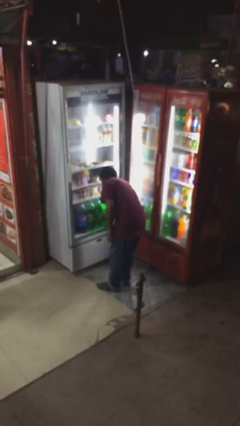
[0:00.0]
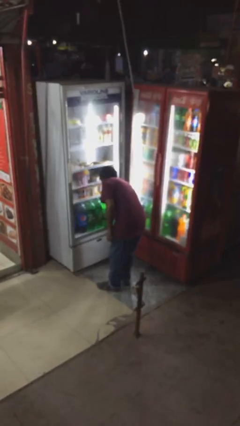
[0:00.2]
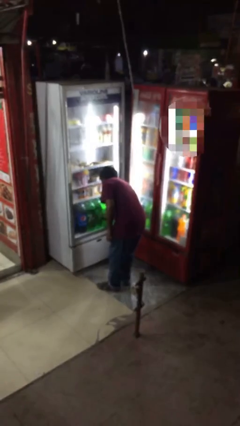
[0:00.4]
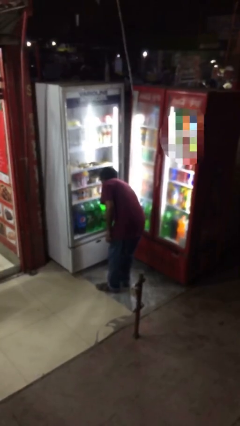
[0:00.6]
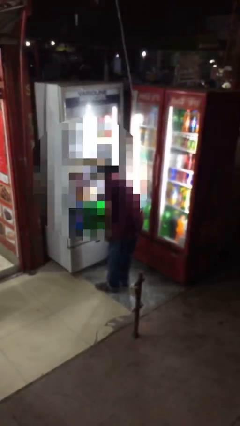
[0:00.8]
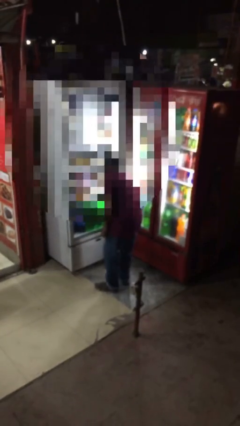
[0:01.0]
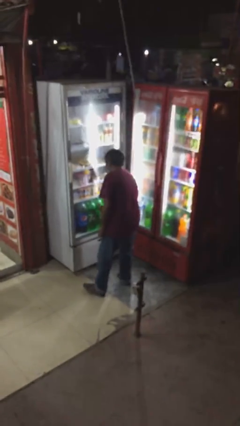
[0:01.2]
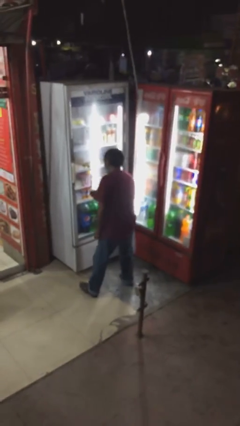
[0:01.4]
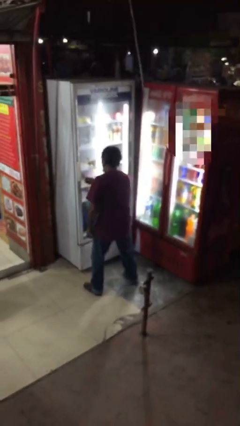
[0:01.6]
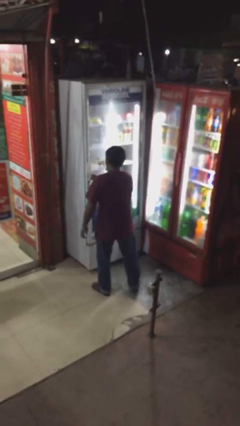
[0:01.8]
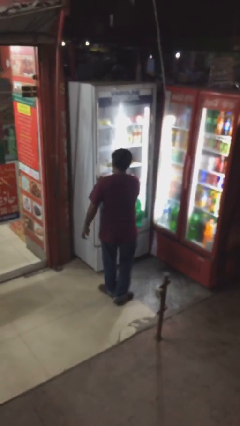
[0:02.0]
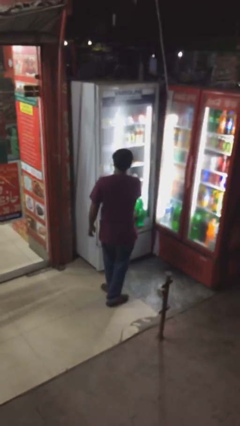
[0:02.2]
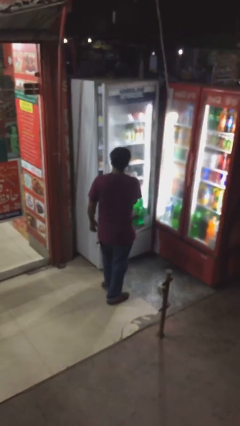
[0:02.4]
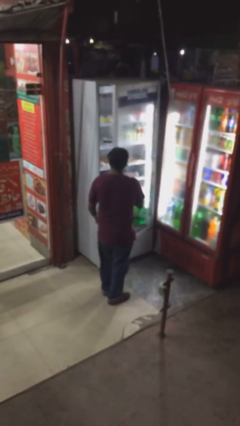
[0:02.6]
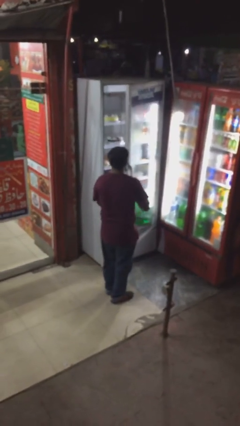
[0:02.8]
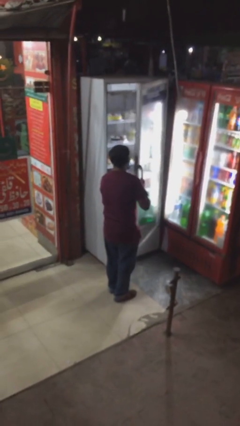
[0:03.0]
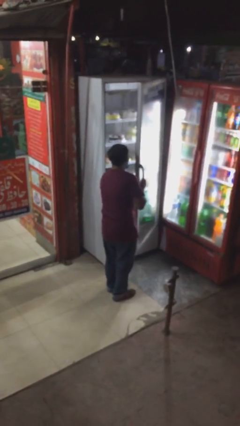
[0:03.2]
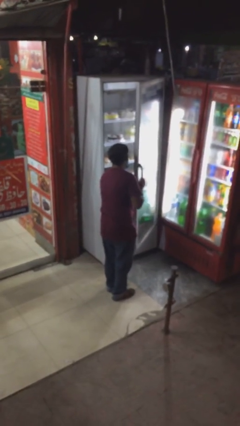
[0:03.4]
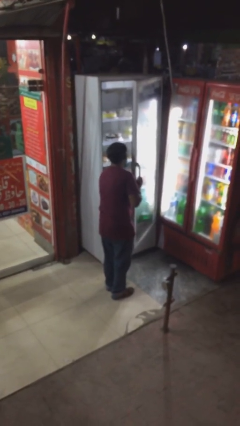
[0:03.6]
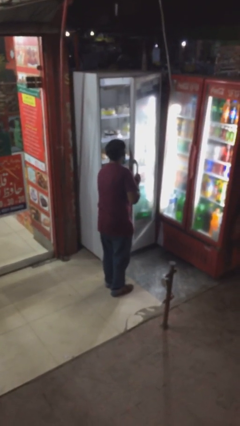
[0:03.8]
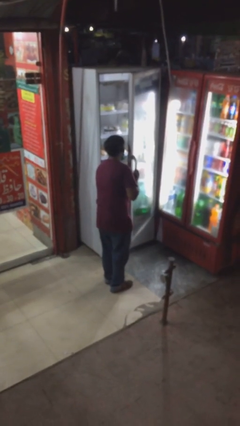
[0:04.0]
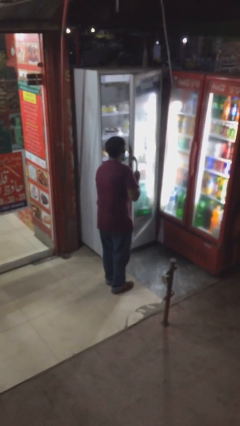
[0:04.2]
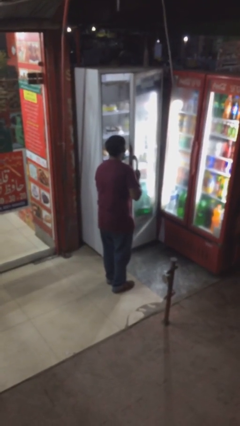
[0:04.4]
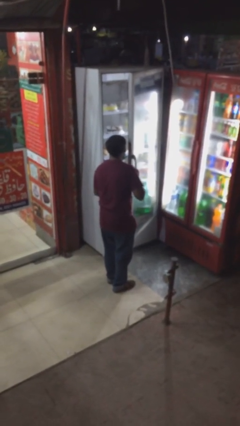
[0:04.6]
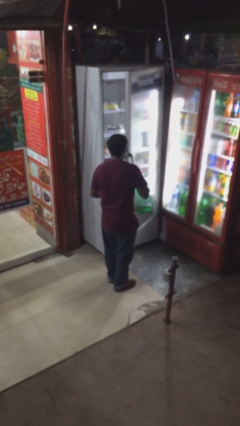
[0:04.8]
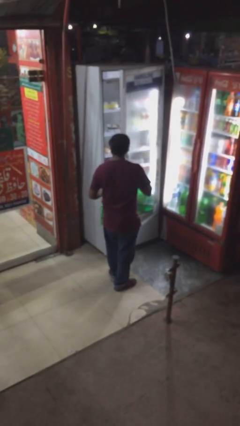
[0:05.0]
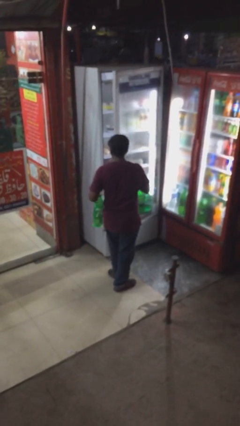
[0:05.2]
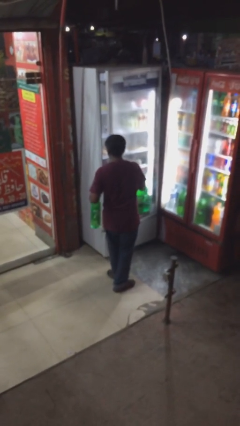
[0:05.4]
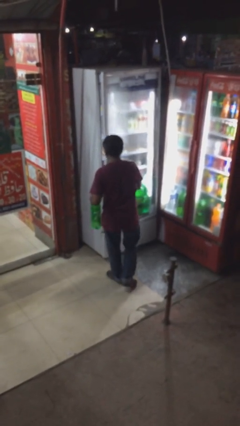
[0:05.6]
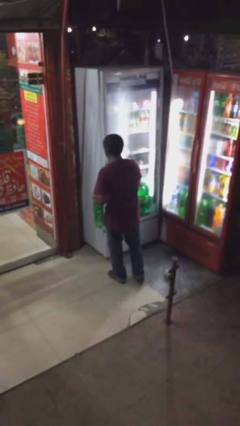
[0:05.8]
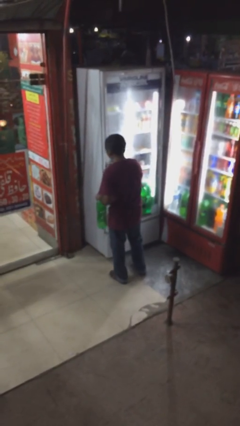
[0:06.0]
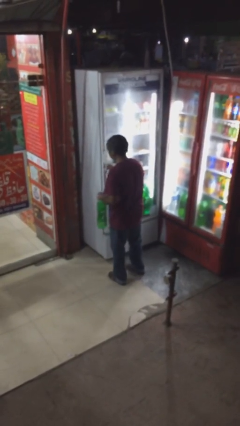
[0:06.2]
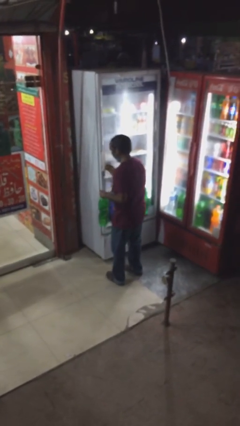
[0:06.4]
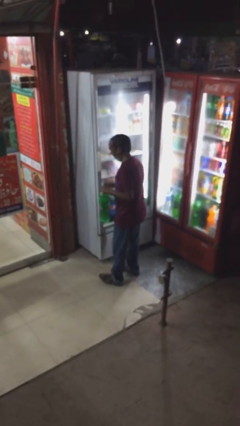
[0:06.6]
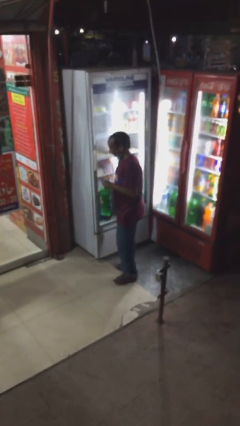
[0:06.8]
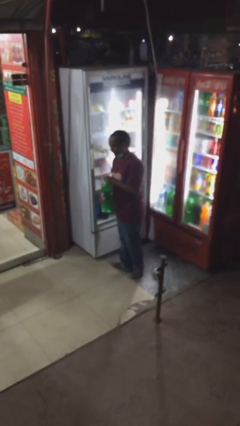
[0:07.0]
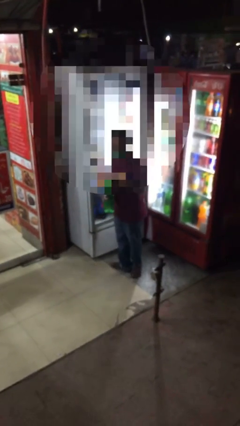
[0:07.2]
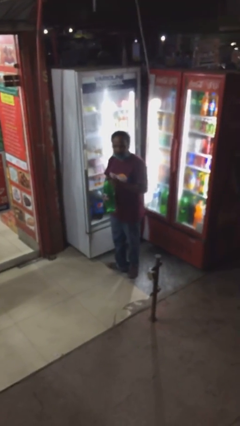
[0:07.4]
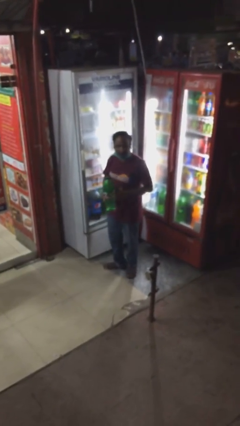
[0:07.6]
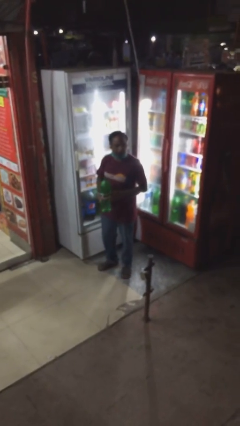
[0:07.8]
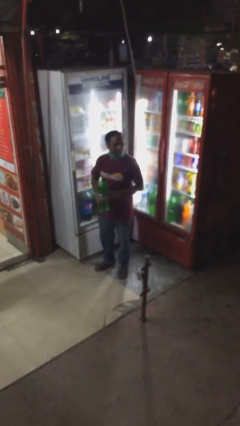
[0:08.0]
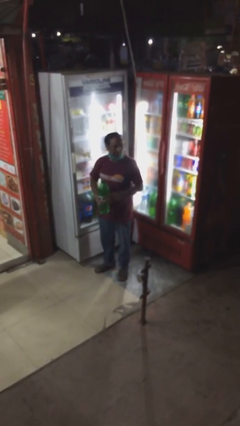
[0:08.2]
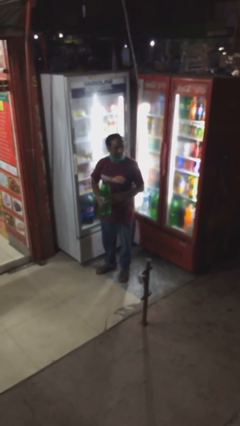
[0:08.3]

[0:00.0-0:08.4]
person purchases from machine

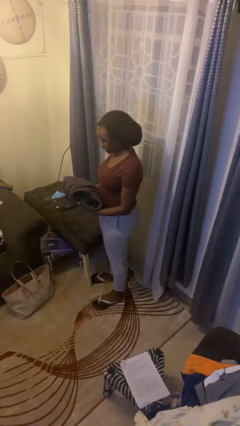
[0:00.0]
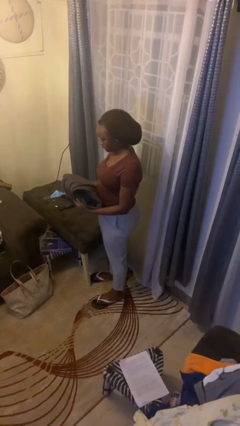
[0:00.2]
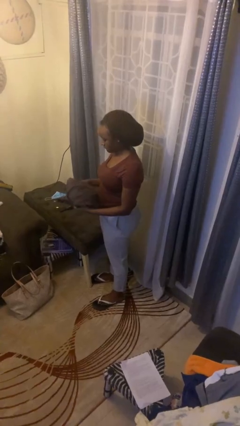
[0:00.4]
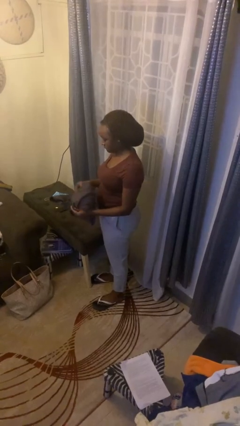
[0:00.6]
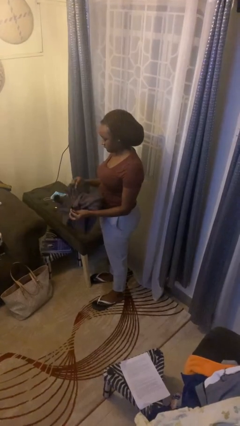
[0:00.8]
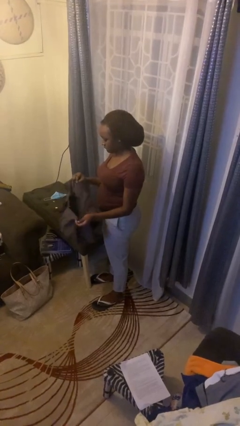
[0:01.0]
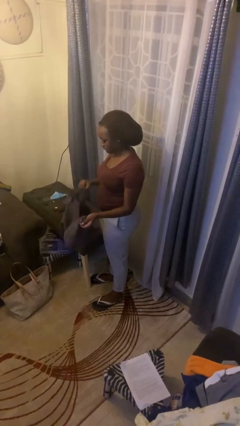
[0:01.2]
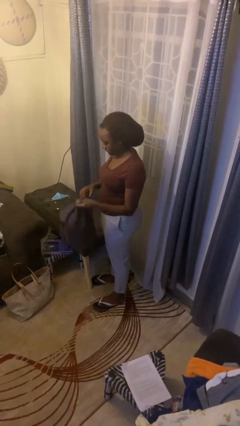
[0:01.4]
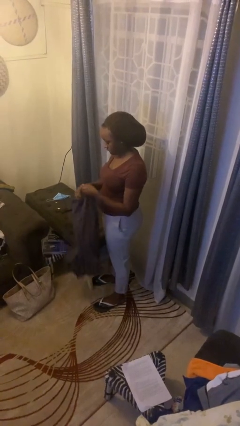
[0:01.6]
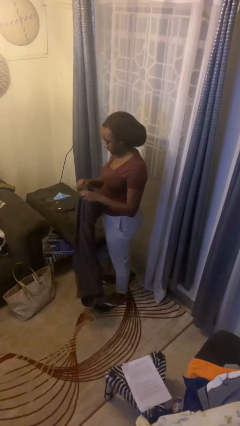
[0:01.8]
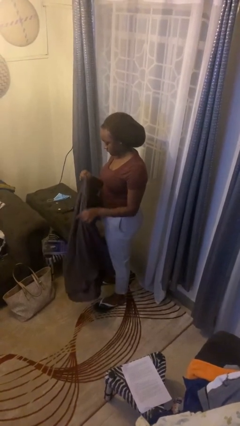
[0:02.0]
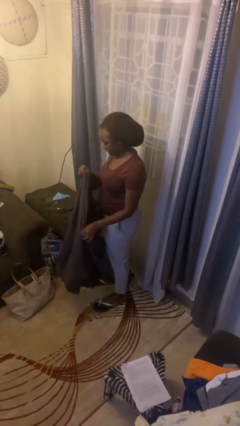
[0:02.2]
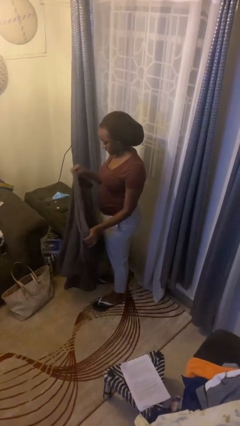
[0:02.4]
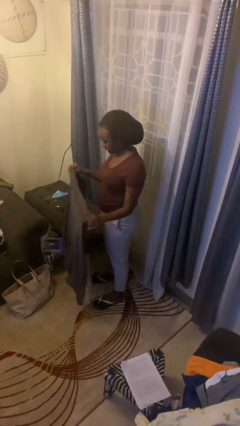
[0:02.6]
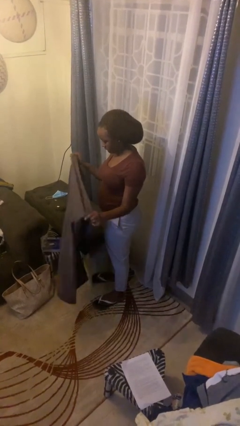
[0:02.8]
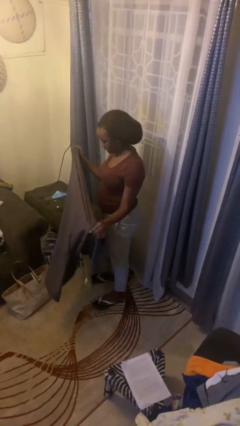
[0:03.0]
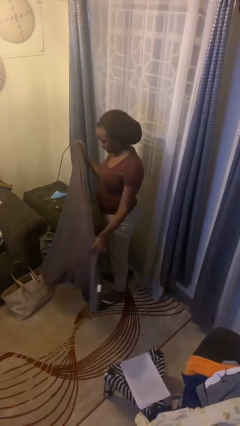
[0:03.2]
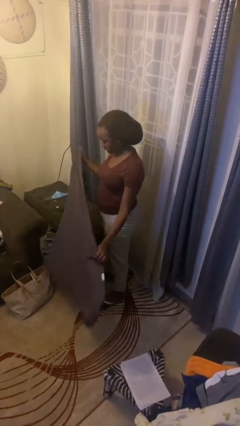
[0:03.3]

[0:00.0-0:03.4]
person unfolds blanket

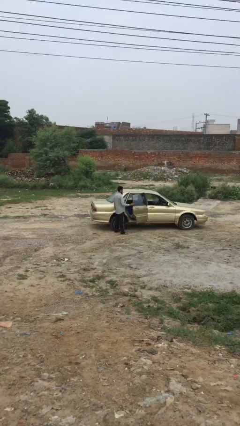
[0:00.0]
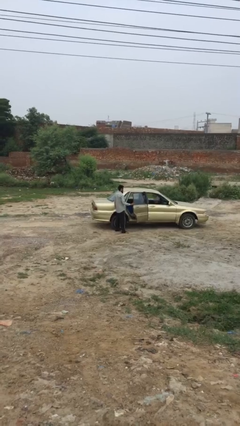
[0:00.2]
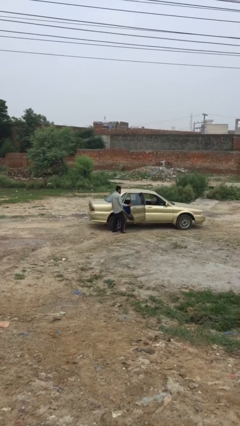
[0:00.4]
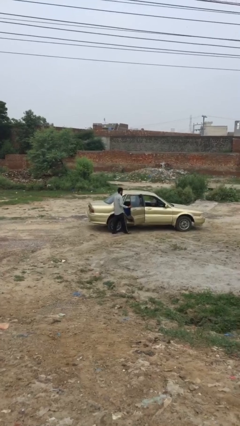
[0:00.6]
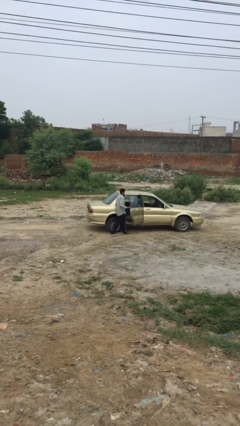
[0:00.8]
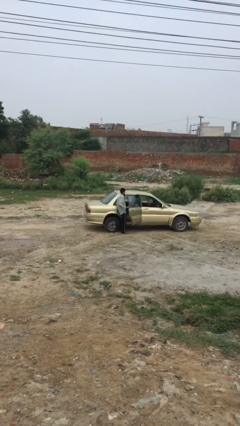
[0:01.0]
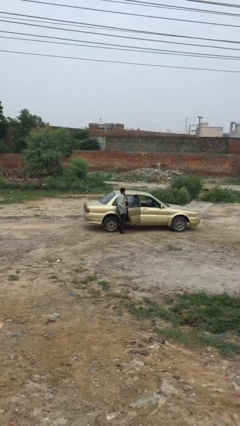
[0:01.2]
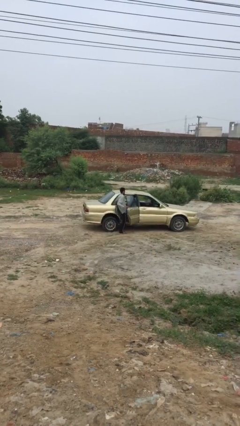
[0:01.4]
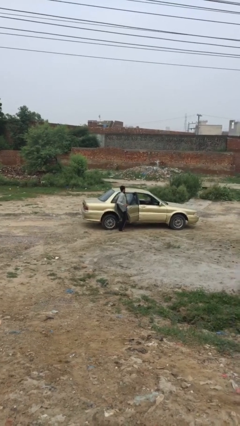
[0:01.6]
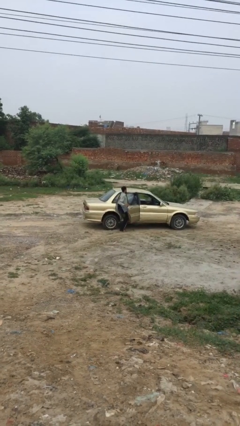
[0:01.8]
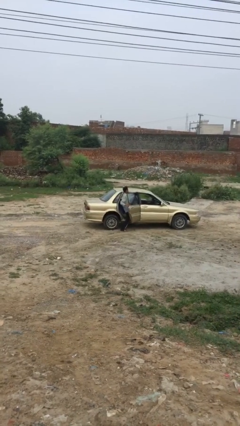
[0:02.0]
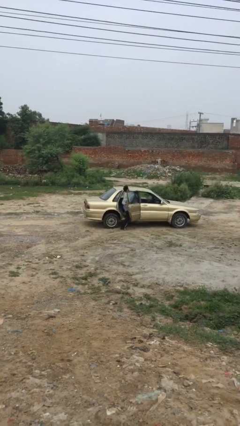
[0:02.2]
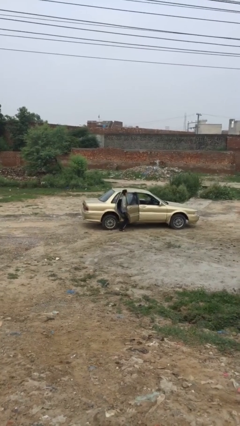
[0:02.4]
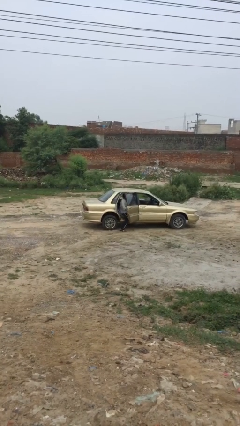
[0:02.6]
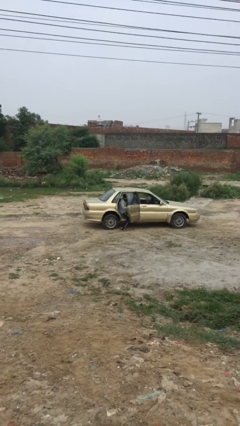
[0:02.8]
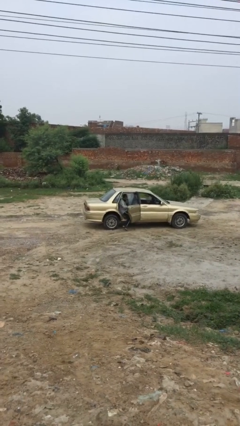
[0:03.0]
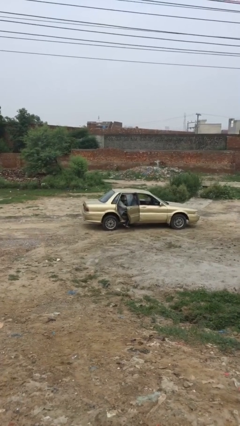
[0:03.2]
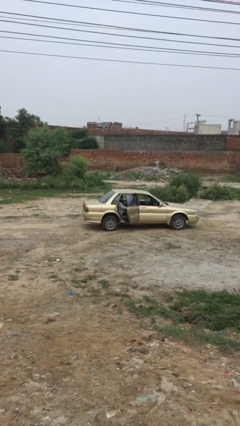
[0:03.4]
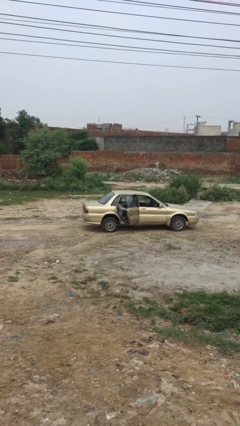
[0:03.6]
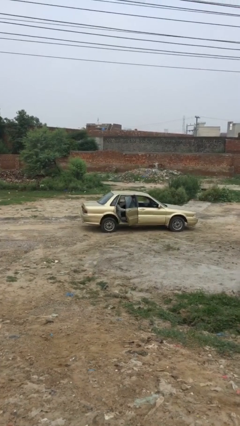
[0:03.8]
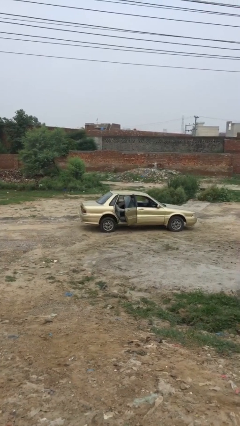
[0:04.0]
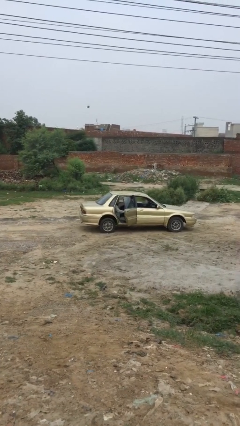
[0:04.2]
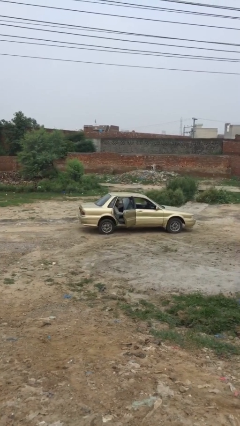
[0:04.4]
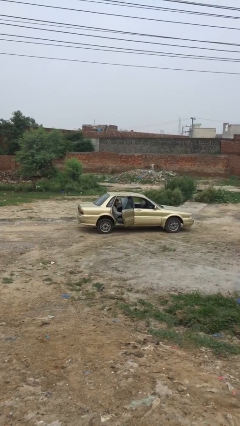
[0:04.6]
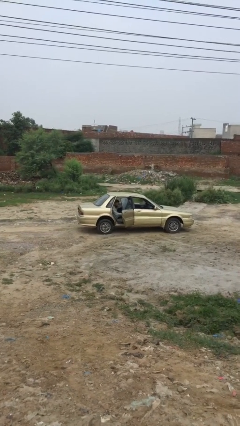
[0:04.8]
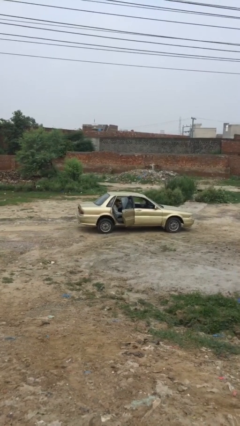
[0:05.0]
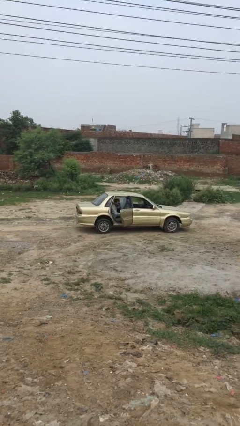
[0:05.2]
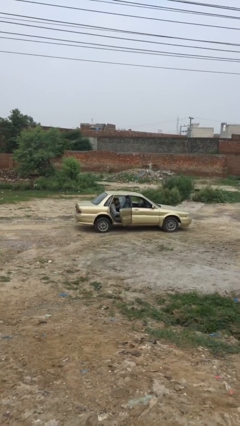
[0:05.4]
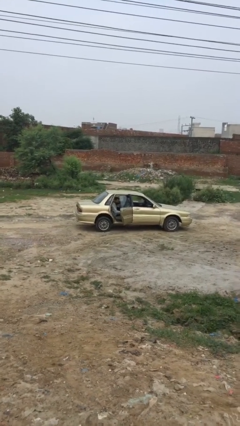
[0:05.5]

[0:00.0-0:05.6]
person enters car
